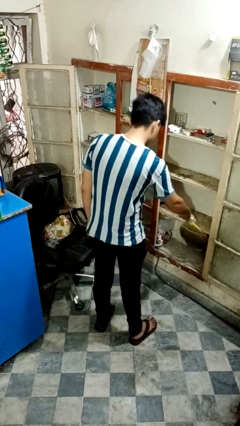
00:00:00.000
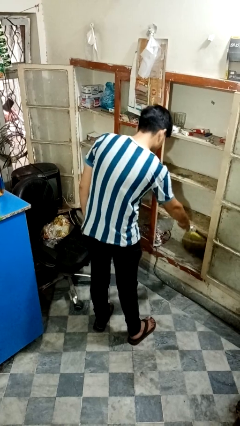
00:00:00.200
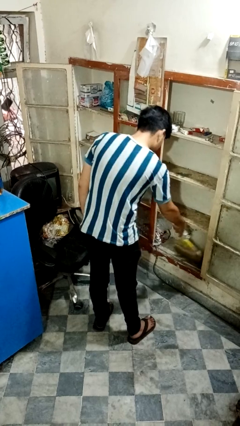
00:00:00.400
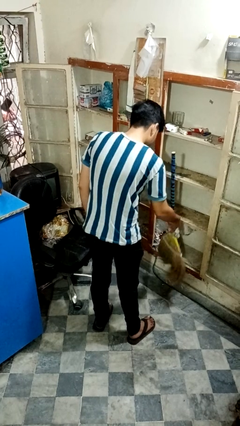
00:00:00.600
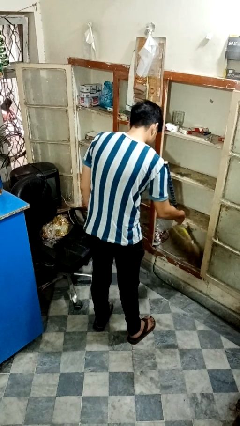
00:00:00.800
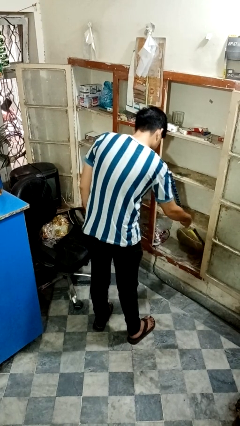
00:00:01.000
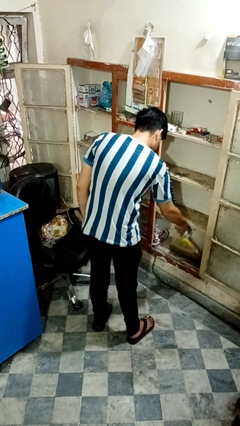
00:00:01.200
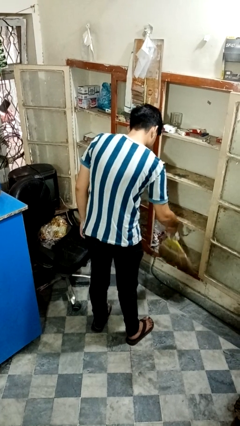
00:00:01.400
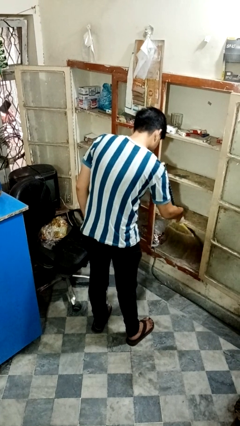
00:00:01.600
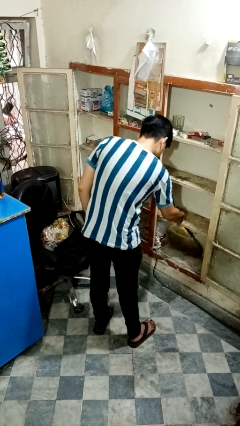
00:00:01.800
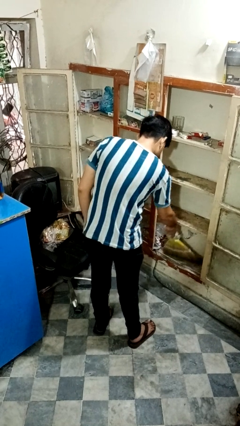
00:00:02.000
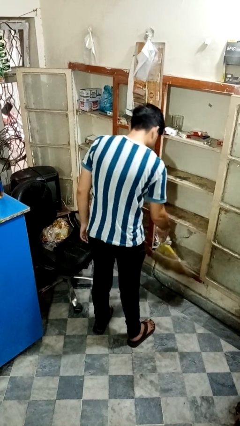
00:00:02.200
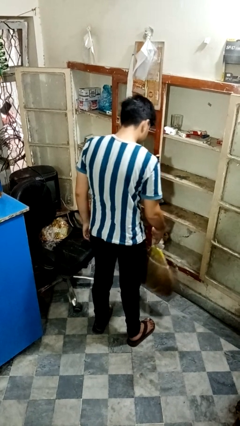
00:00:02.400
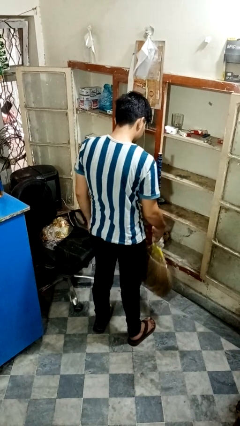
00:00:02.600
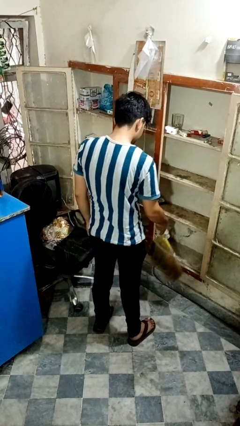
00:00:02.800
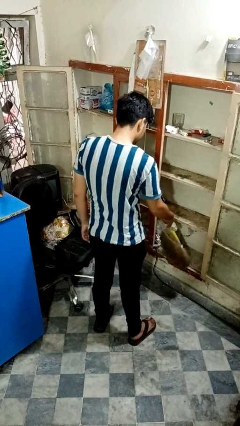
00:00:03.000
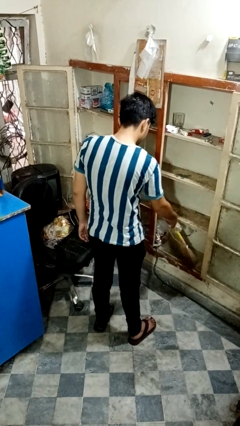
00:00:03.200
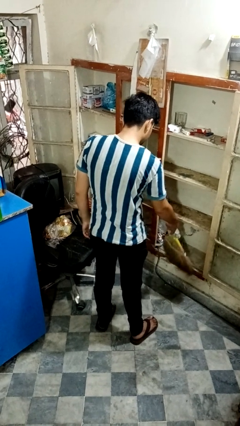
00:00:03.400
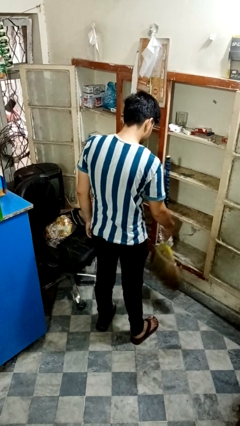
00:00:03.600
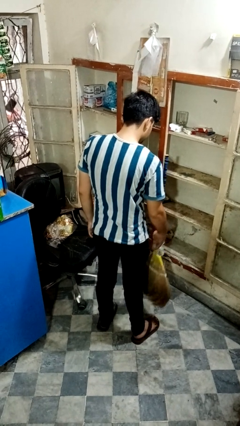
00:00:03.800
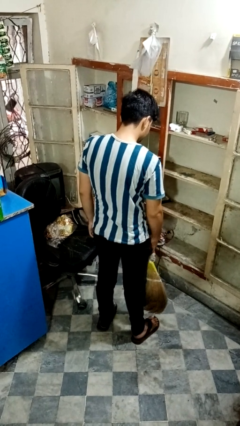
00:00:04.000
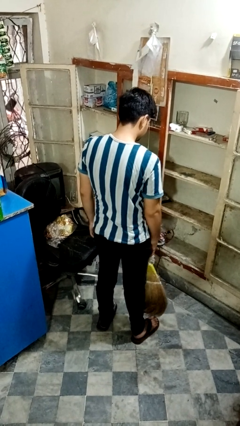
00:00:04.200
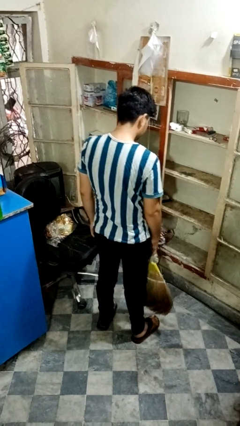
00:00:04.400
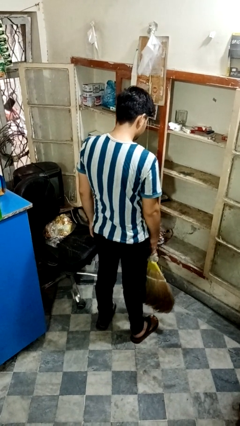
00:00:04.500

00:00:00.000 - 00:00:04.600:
person dusts furniture

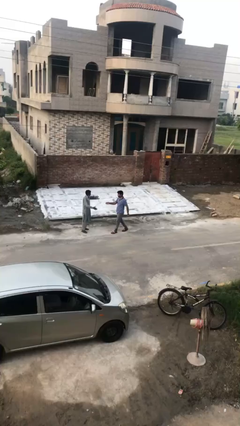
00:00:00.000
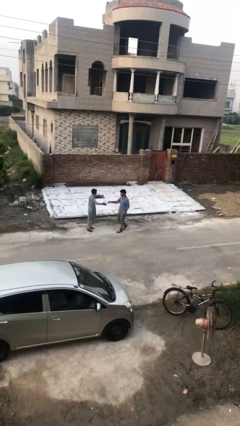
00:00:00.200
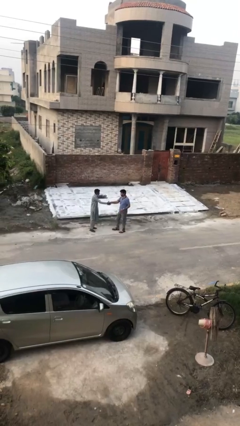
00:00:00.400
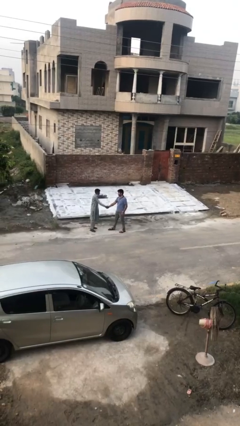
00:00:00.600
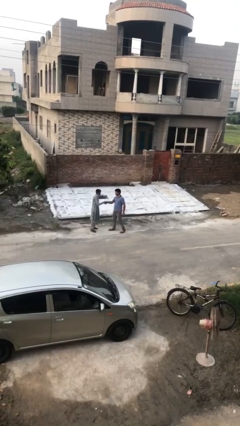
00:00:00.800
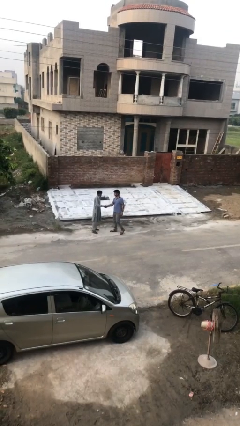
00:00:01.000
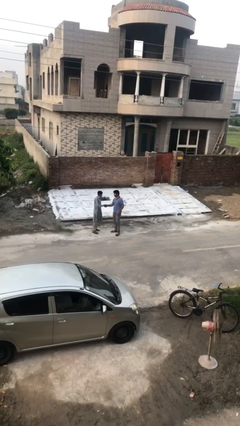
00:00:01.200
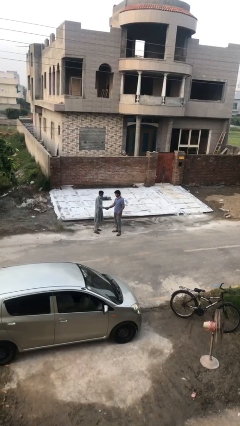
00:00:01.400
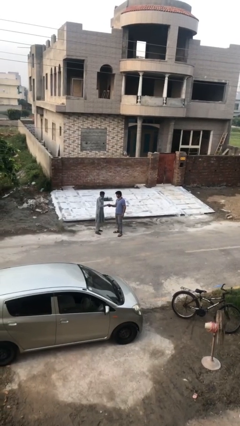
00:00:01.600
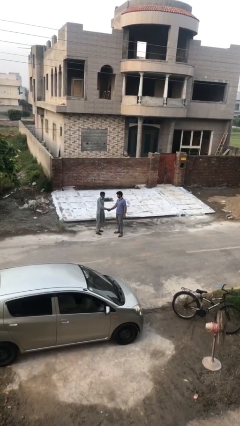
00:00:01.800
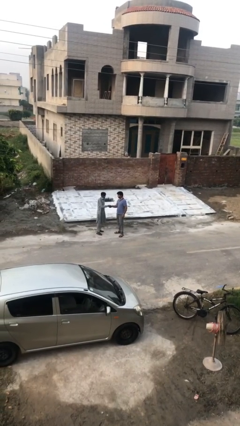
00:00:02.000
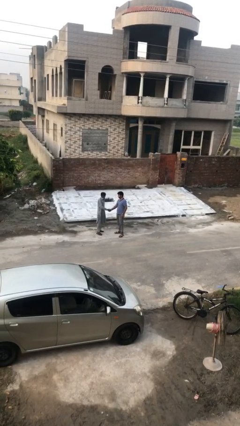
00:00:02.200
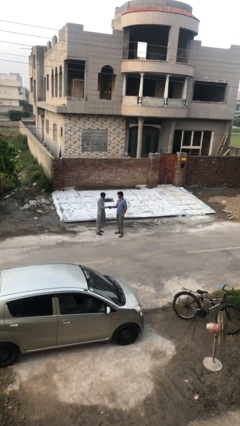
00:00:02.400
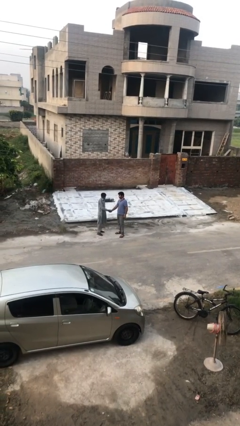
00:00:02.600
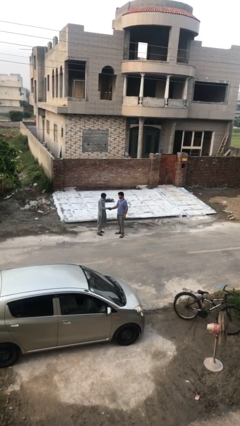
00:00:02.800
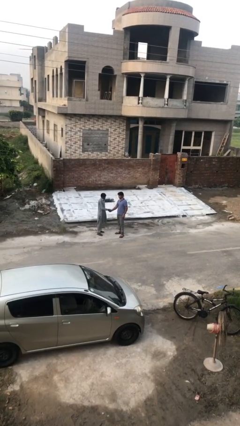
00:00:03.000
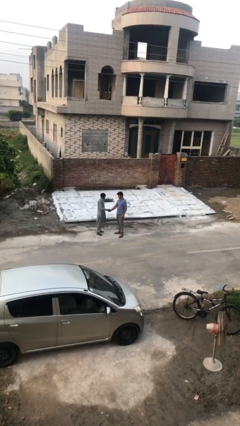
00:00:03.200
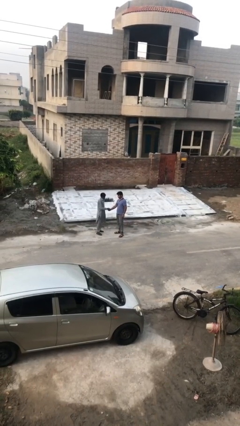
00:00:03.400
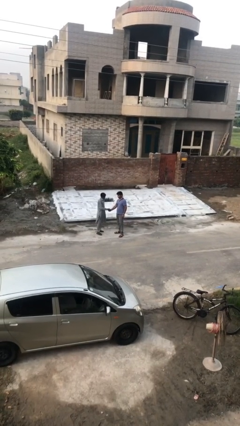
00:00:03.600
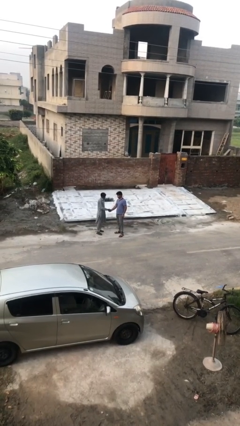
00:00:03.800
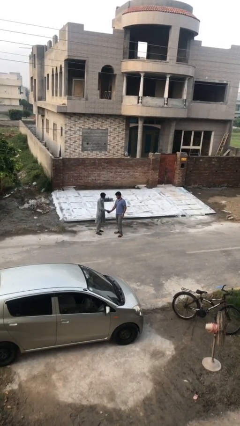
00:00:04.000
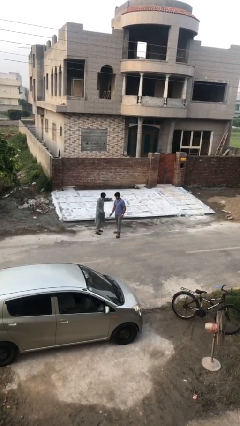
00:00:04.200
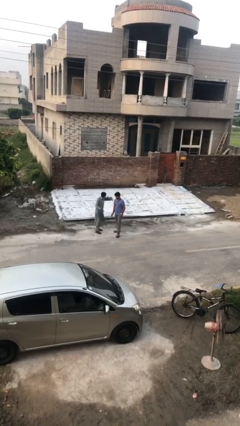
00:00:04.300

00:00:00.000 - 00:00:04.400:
person shakes hand

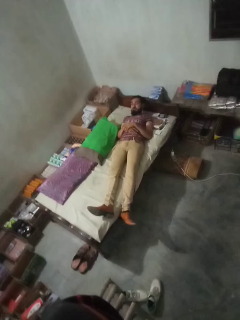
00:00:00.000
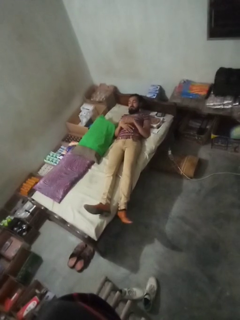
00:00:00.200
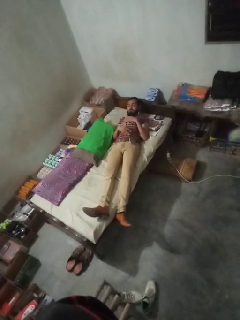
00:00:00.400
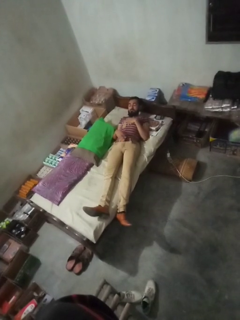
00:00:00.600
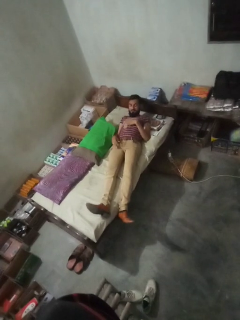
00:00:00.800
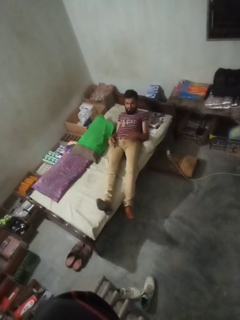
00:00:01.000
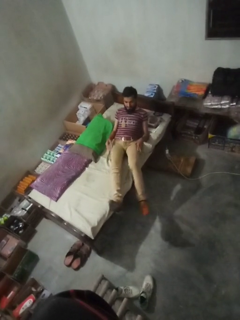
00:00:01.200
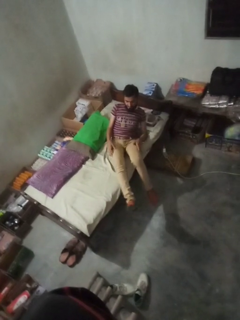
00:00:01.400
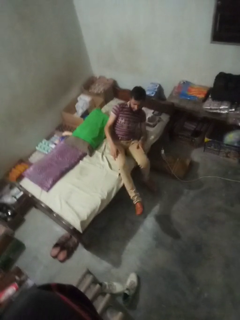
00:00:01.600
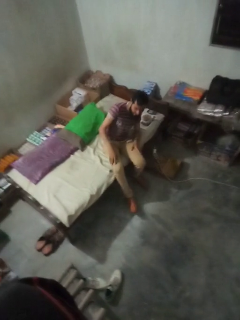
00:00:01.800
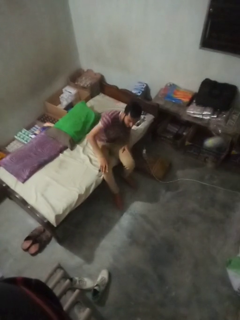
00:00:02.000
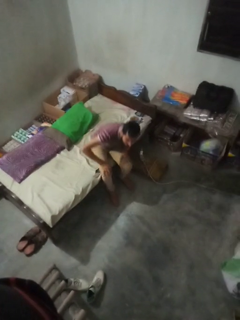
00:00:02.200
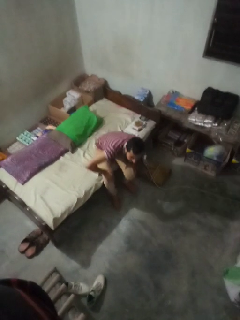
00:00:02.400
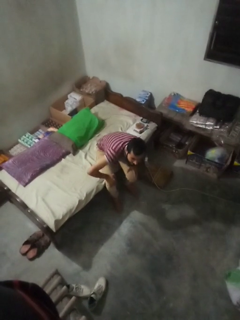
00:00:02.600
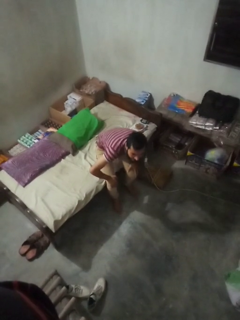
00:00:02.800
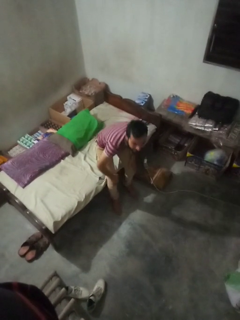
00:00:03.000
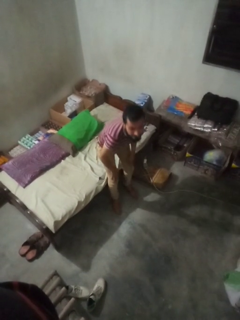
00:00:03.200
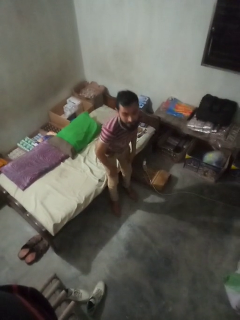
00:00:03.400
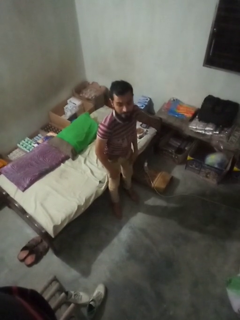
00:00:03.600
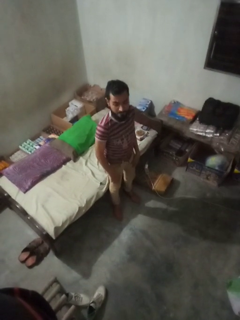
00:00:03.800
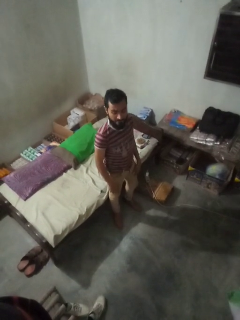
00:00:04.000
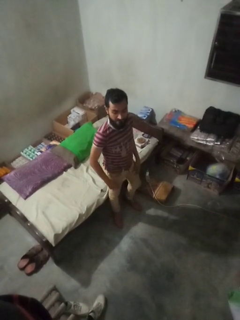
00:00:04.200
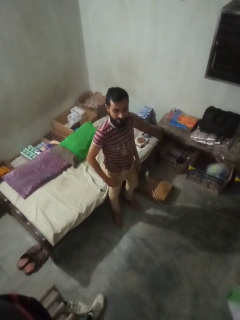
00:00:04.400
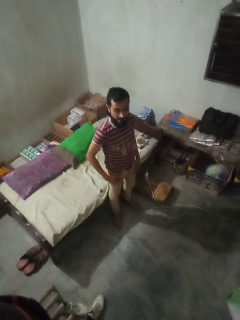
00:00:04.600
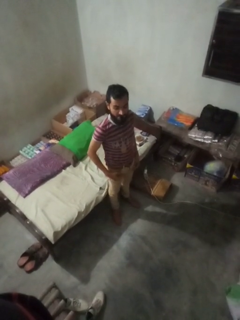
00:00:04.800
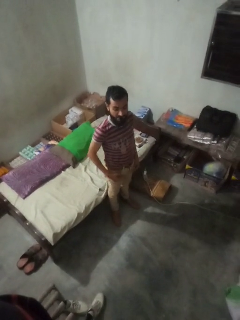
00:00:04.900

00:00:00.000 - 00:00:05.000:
person stands up

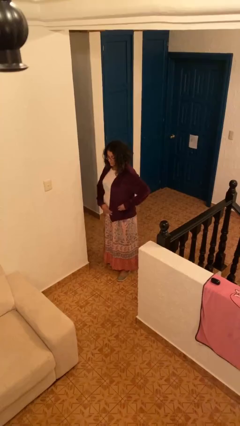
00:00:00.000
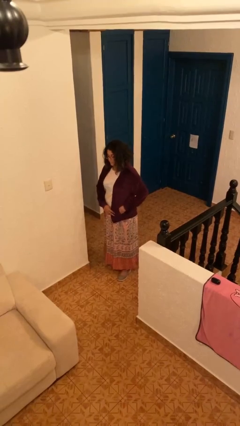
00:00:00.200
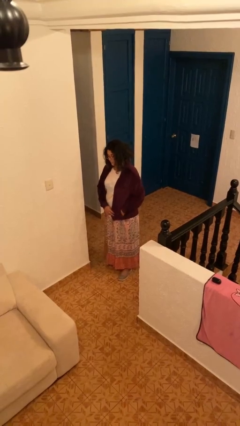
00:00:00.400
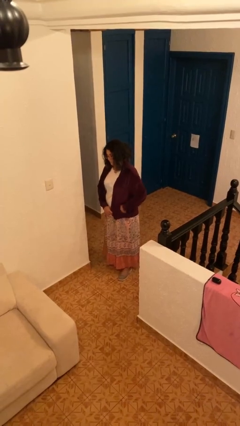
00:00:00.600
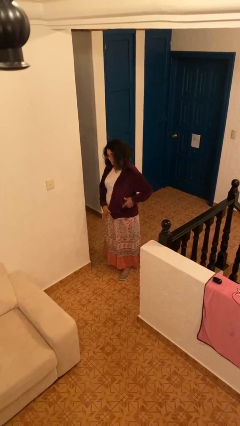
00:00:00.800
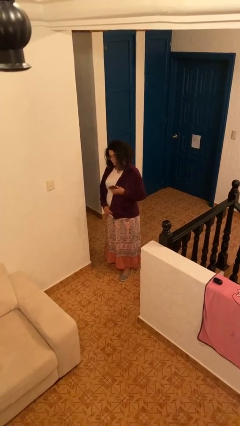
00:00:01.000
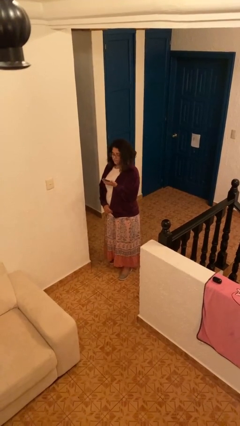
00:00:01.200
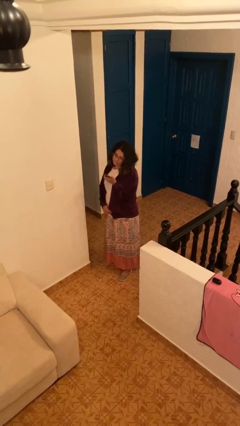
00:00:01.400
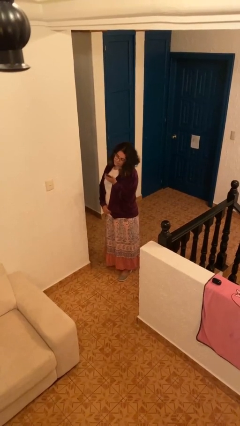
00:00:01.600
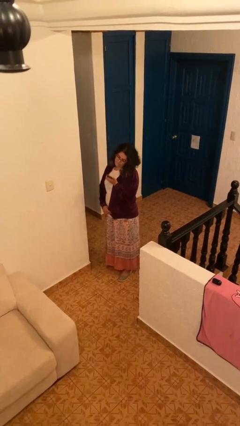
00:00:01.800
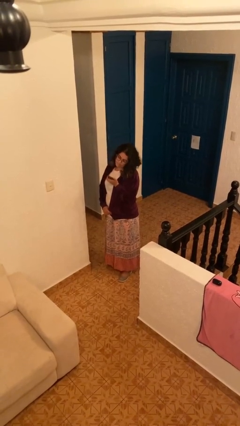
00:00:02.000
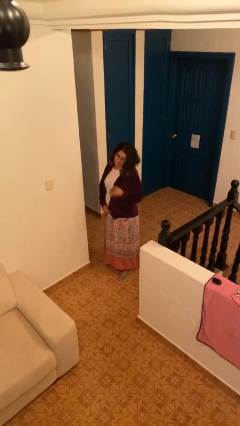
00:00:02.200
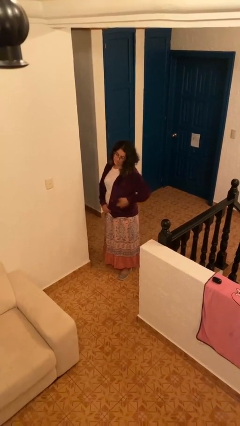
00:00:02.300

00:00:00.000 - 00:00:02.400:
person takes phone from pocket

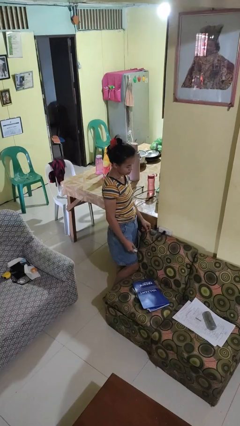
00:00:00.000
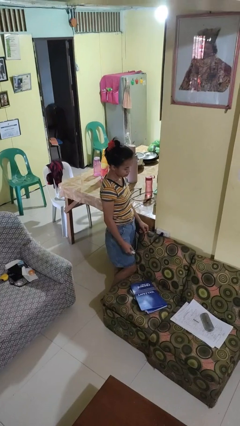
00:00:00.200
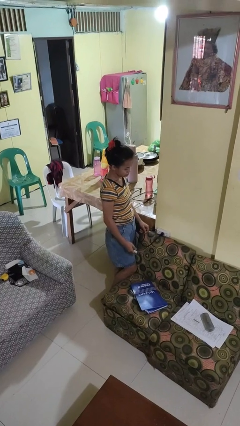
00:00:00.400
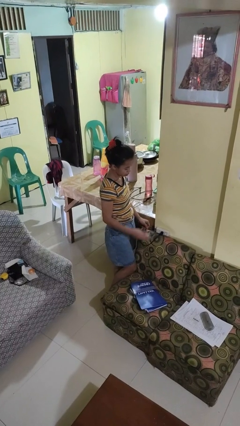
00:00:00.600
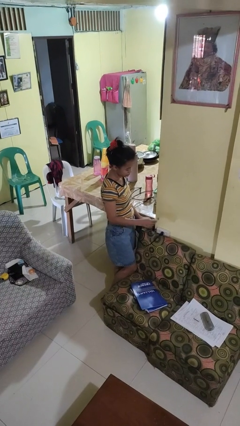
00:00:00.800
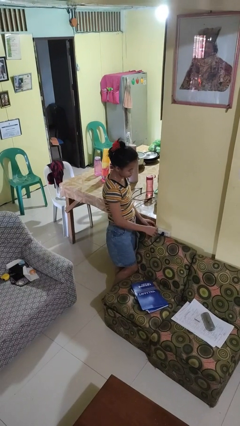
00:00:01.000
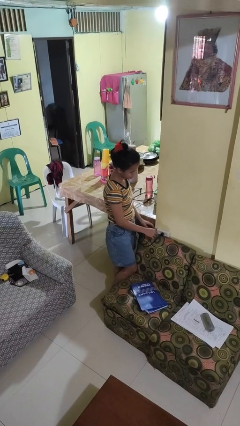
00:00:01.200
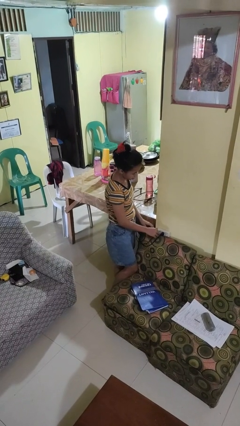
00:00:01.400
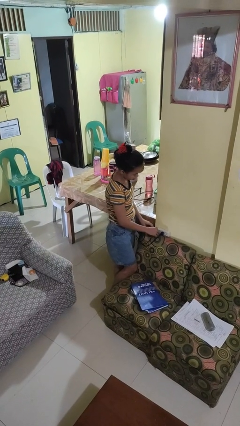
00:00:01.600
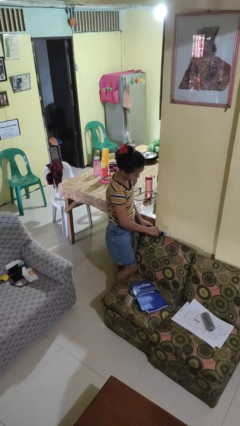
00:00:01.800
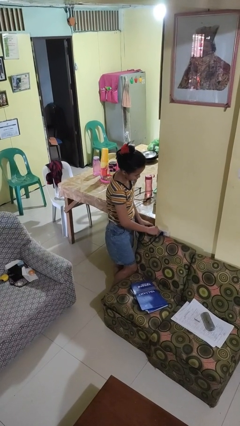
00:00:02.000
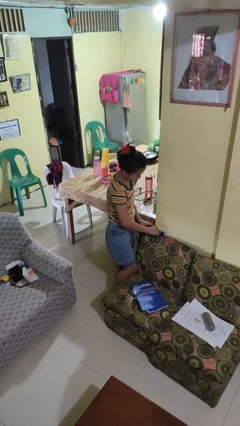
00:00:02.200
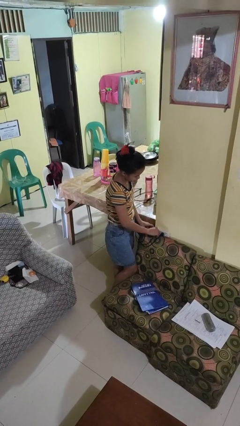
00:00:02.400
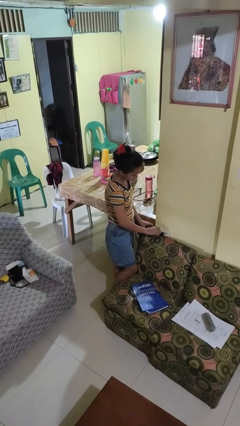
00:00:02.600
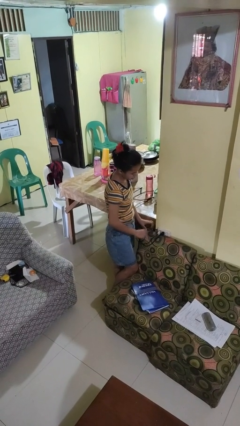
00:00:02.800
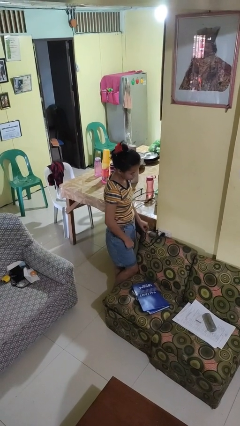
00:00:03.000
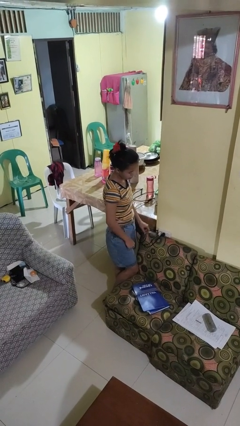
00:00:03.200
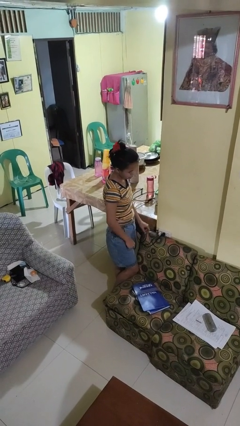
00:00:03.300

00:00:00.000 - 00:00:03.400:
person plugs into electrical socket
